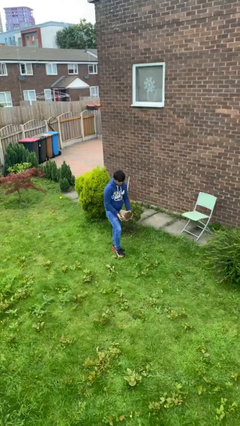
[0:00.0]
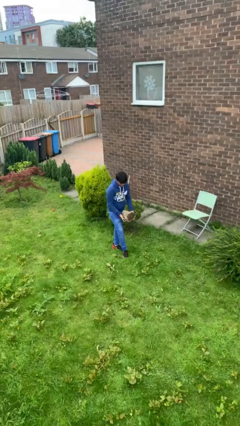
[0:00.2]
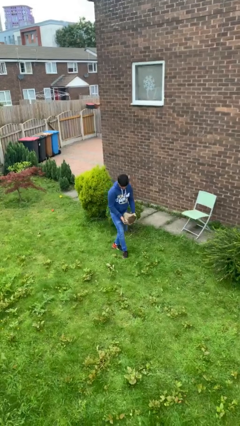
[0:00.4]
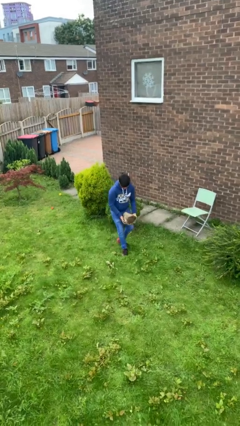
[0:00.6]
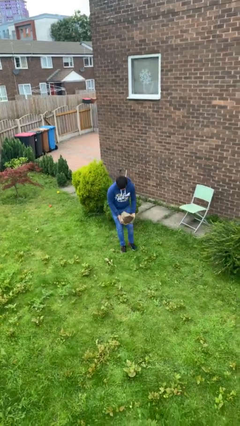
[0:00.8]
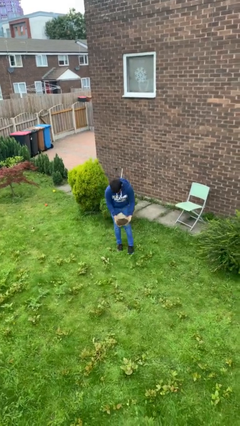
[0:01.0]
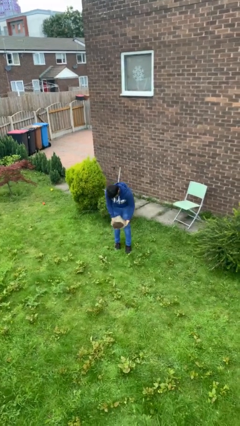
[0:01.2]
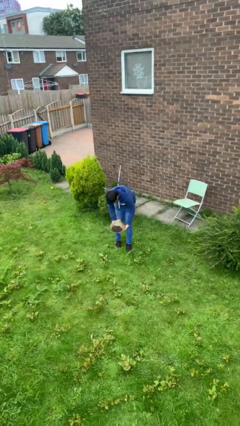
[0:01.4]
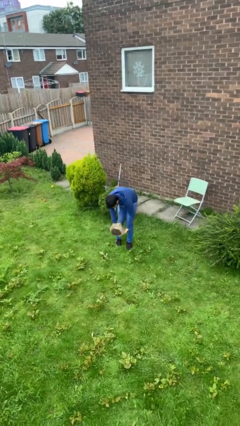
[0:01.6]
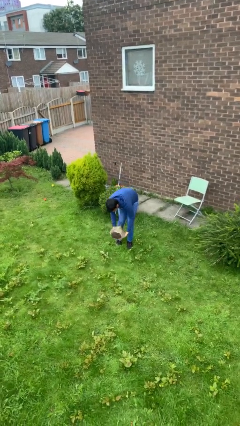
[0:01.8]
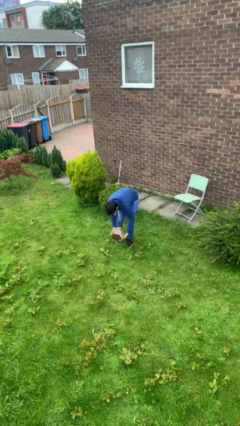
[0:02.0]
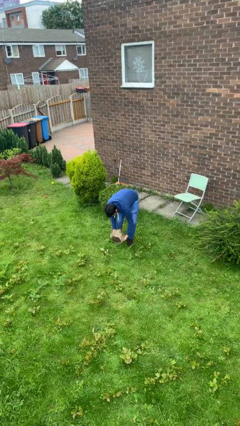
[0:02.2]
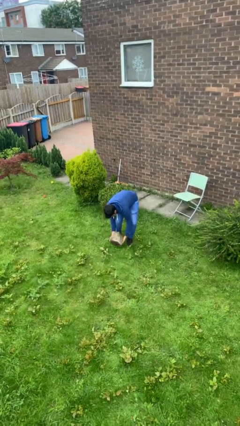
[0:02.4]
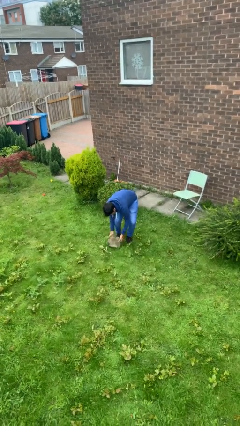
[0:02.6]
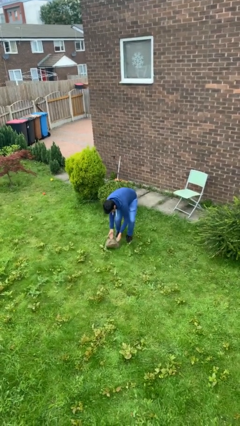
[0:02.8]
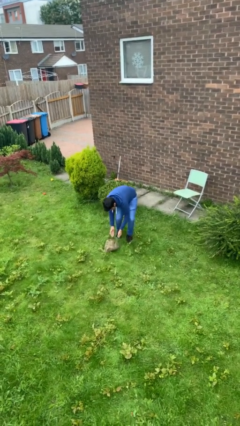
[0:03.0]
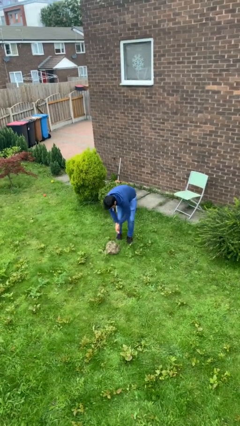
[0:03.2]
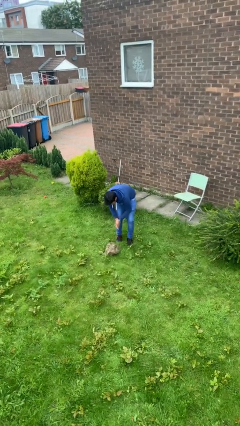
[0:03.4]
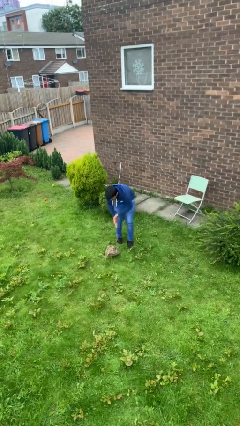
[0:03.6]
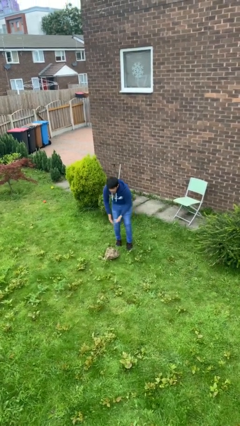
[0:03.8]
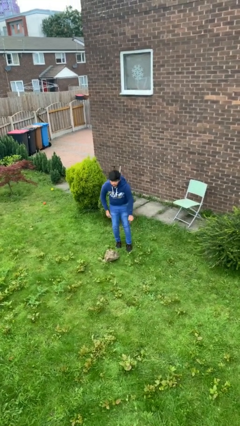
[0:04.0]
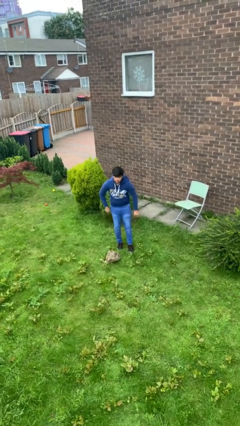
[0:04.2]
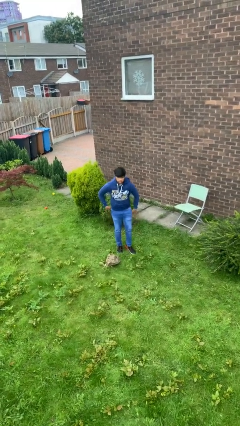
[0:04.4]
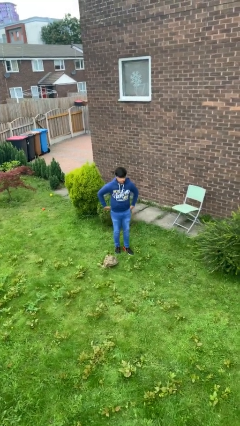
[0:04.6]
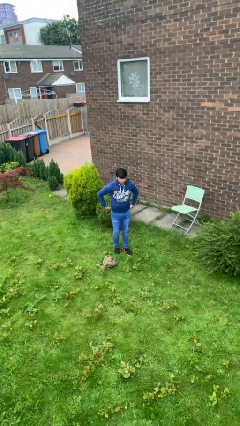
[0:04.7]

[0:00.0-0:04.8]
person puts down object on floor

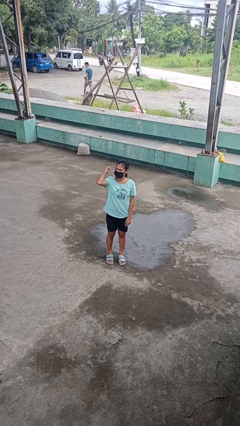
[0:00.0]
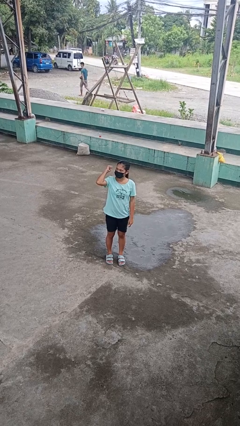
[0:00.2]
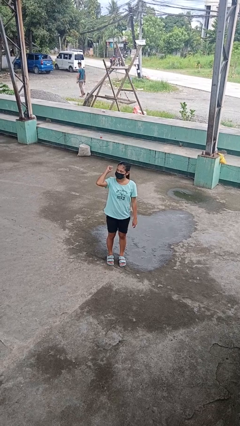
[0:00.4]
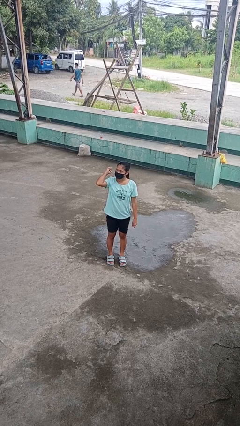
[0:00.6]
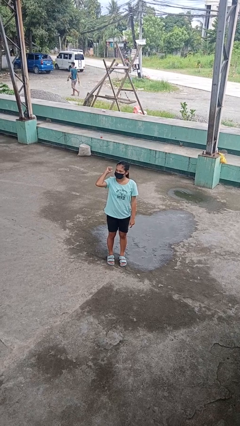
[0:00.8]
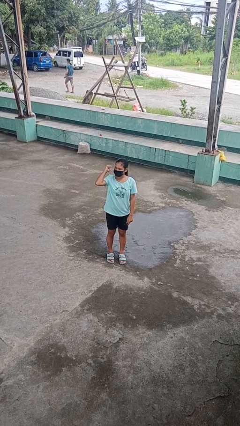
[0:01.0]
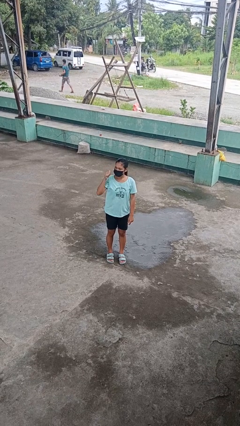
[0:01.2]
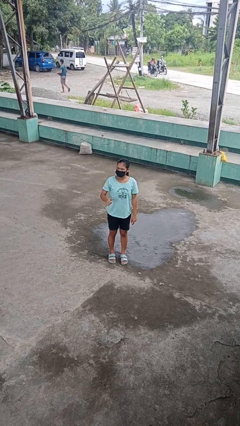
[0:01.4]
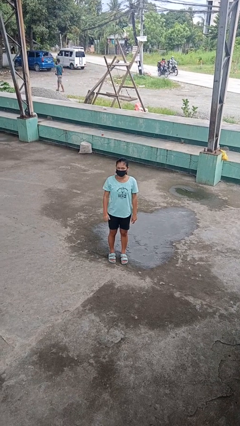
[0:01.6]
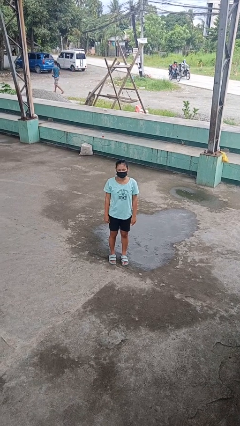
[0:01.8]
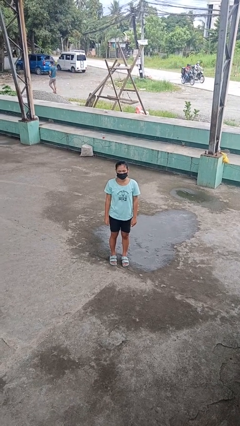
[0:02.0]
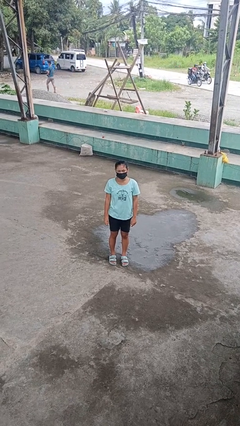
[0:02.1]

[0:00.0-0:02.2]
person gestures behind me

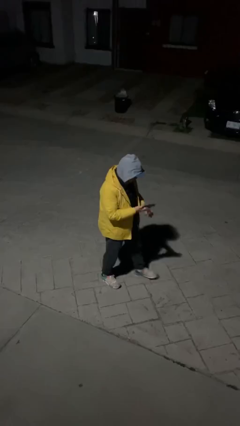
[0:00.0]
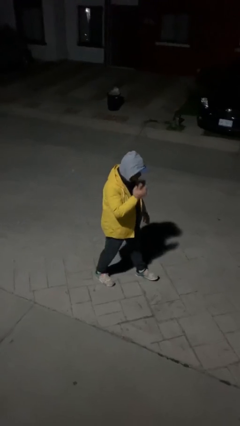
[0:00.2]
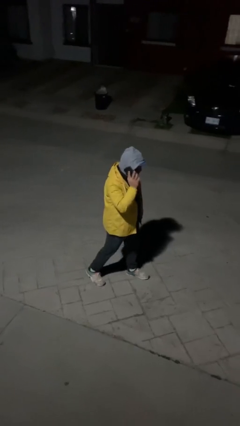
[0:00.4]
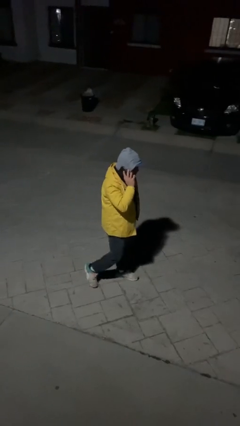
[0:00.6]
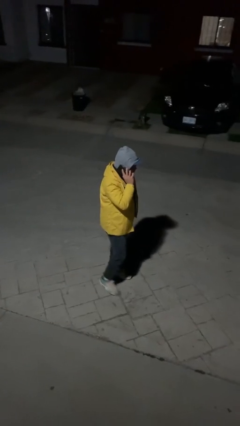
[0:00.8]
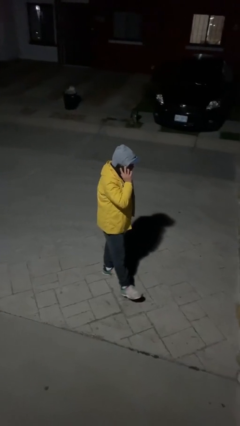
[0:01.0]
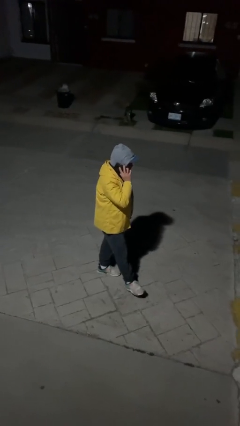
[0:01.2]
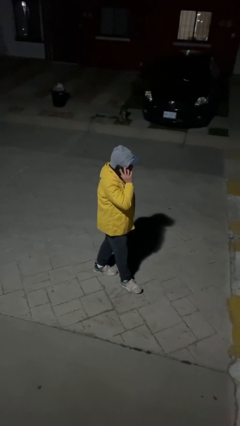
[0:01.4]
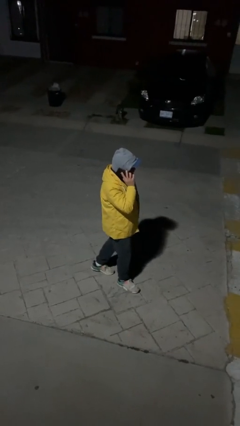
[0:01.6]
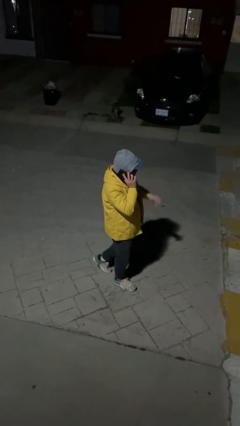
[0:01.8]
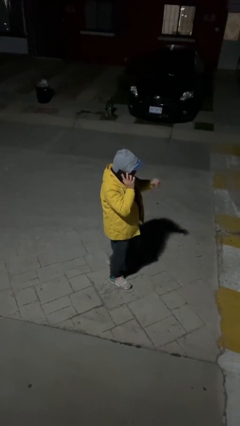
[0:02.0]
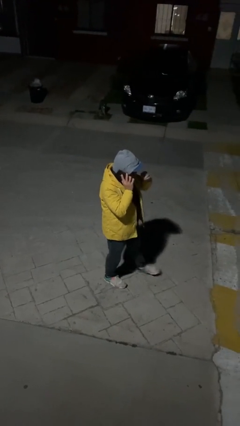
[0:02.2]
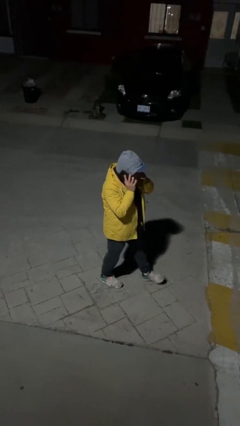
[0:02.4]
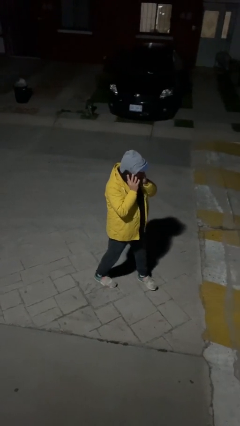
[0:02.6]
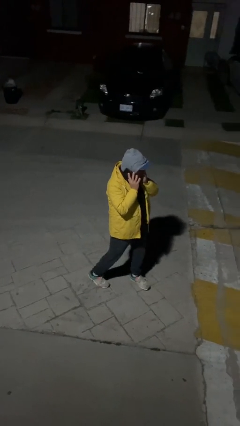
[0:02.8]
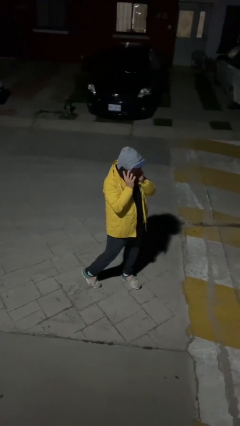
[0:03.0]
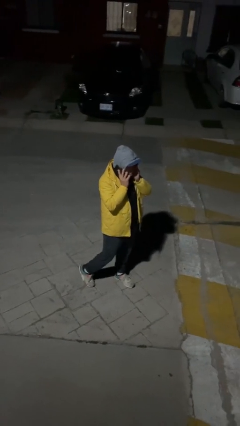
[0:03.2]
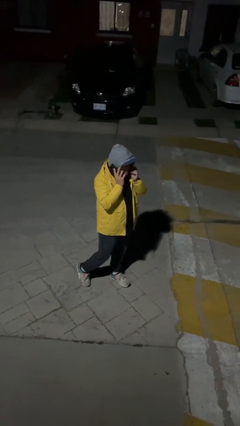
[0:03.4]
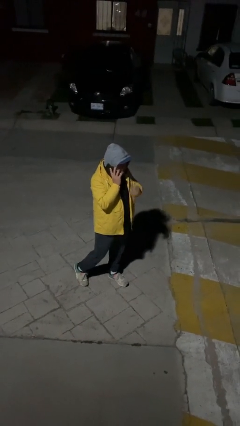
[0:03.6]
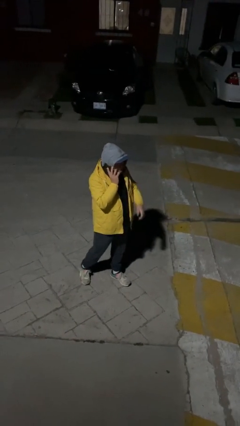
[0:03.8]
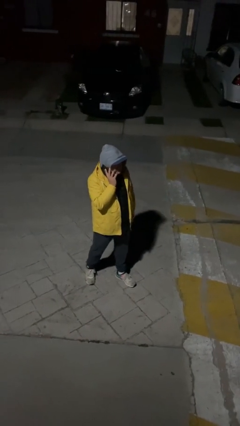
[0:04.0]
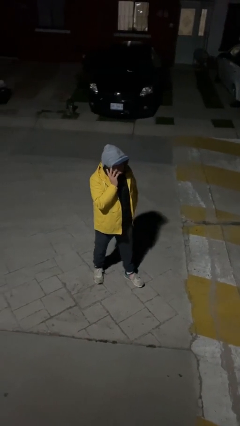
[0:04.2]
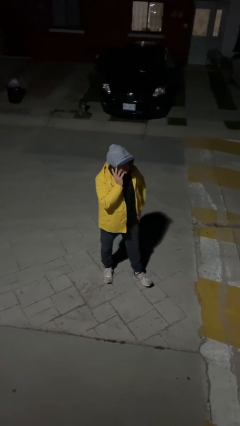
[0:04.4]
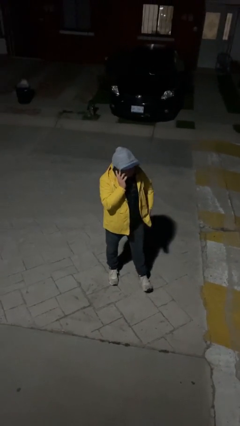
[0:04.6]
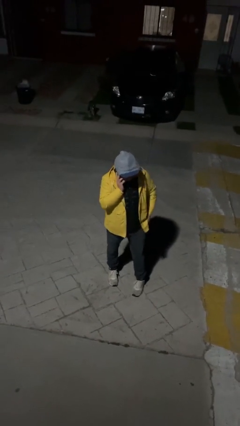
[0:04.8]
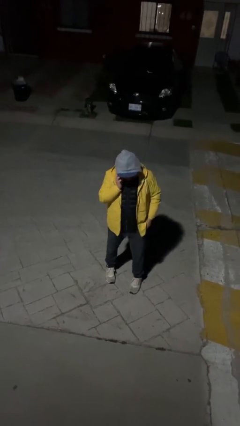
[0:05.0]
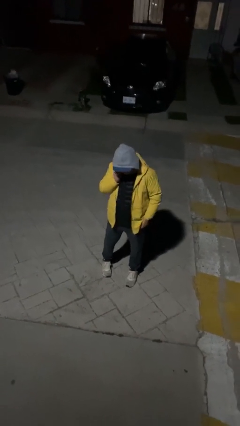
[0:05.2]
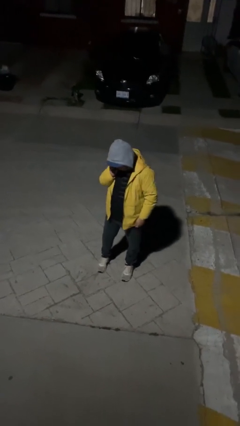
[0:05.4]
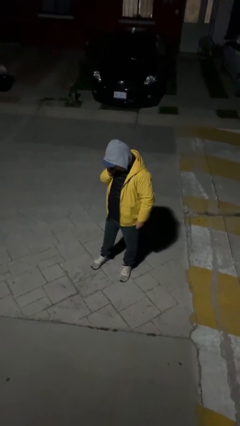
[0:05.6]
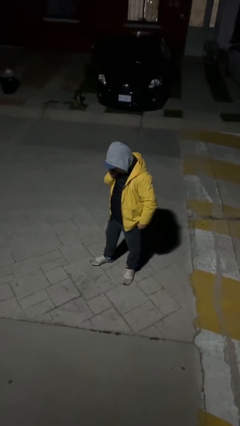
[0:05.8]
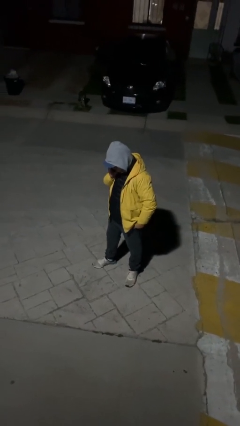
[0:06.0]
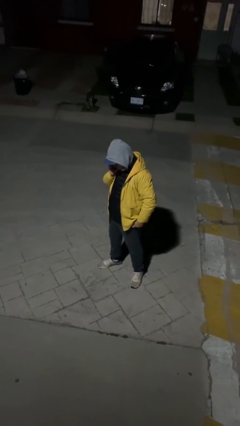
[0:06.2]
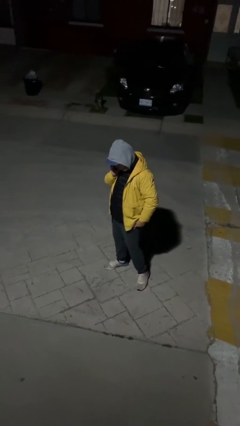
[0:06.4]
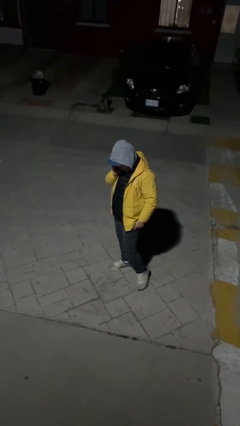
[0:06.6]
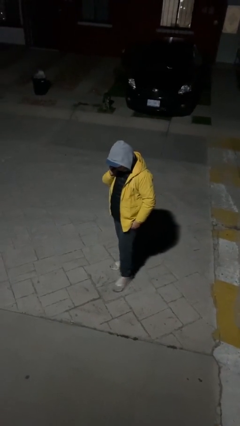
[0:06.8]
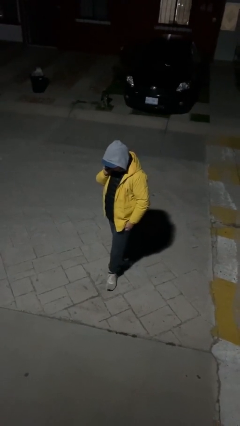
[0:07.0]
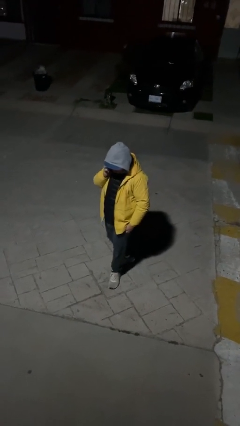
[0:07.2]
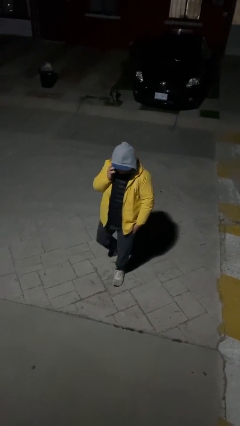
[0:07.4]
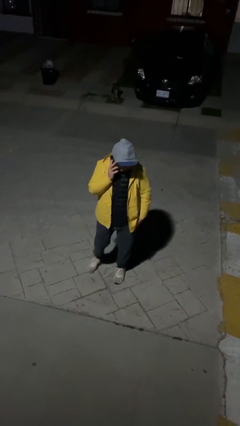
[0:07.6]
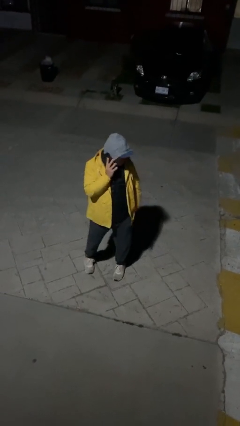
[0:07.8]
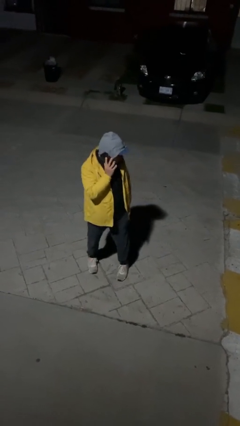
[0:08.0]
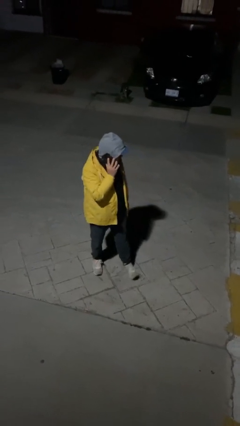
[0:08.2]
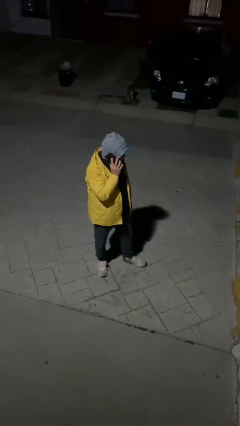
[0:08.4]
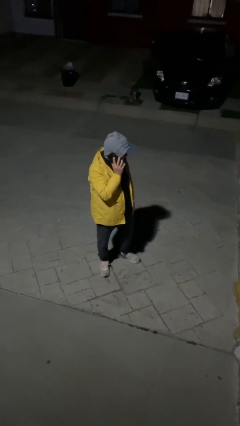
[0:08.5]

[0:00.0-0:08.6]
person talks on phone

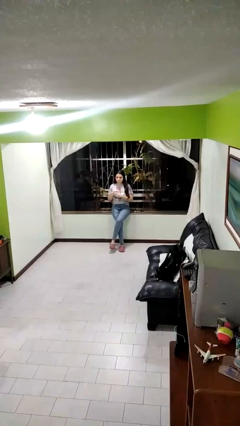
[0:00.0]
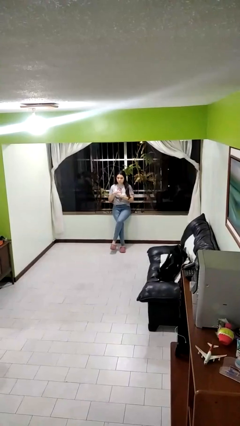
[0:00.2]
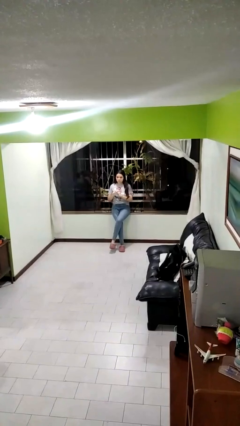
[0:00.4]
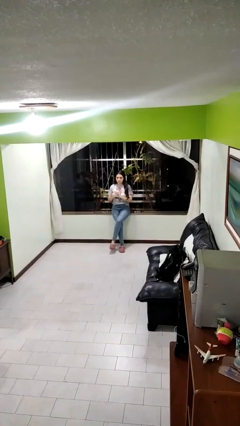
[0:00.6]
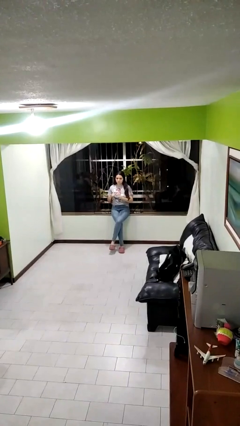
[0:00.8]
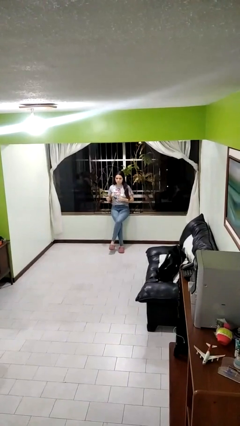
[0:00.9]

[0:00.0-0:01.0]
person puts on ring

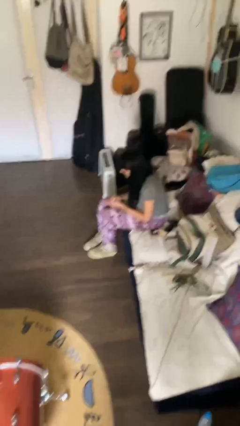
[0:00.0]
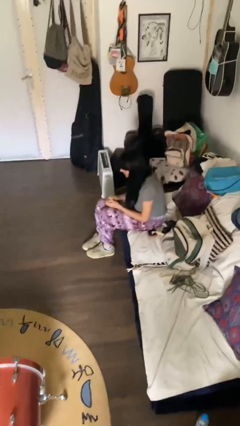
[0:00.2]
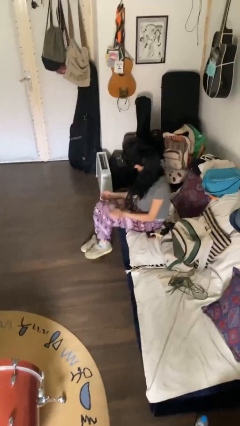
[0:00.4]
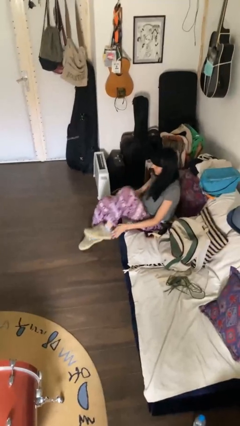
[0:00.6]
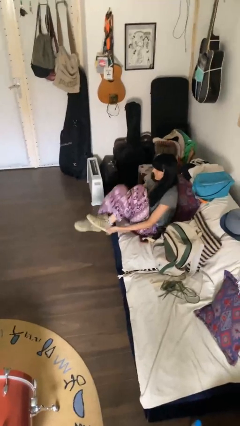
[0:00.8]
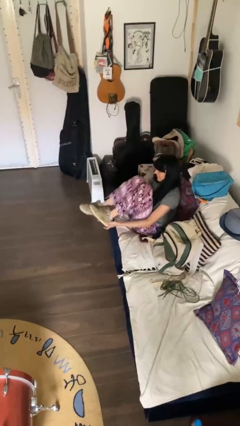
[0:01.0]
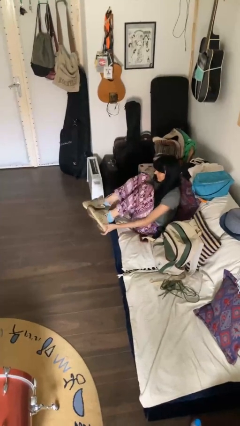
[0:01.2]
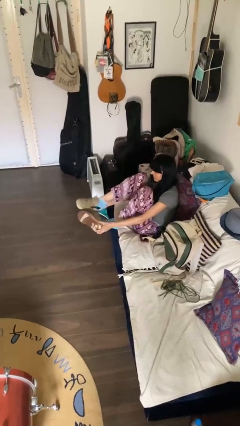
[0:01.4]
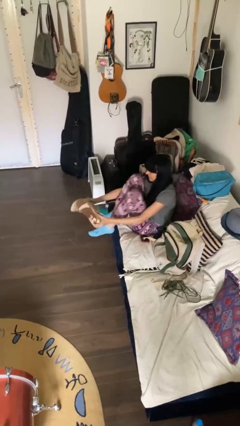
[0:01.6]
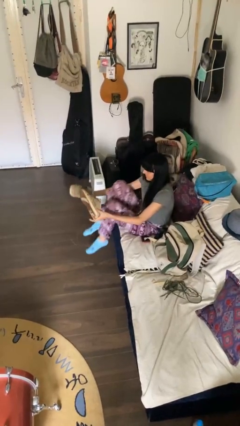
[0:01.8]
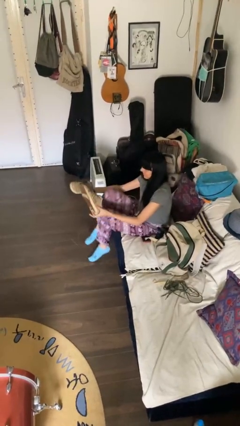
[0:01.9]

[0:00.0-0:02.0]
person takes off shoes
